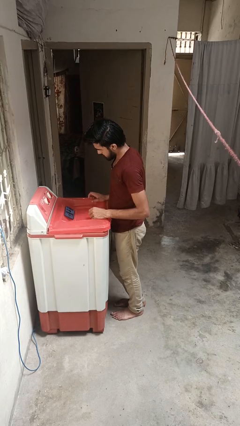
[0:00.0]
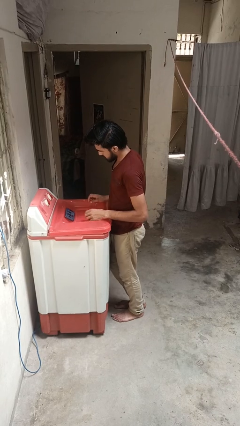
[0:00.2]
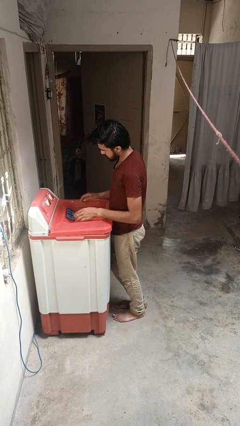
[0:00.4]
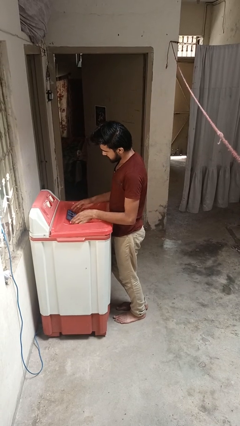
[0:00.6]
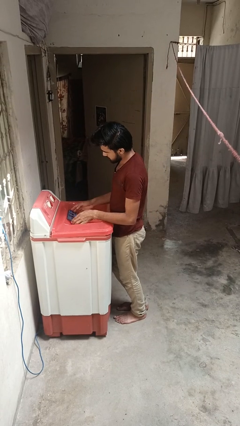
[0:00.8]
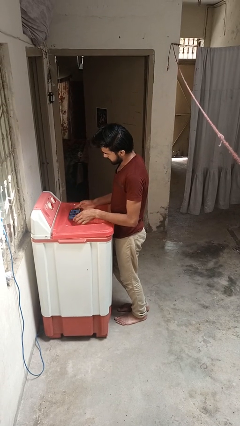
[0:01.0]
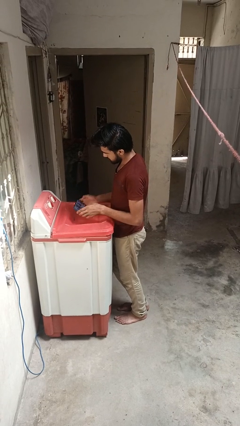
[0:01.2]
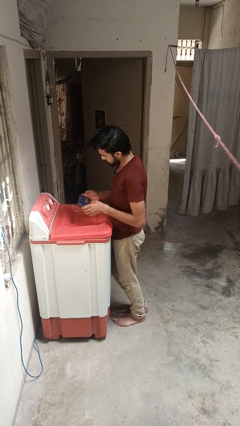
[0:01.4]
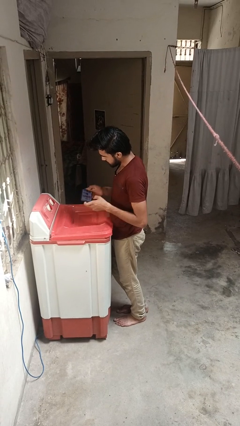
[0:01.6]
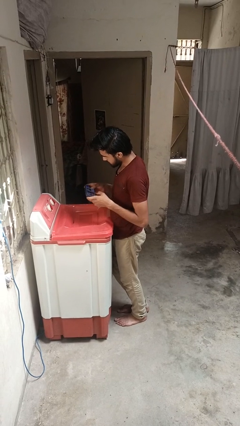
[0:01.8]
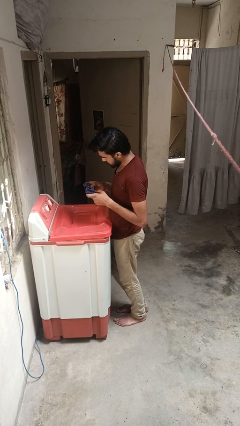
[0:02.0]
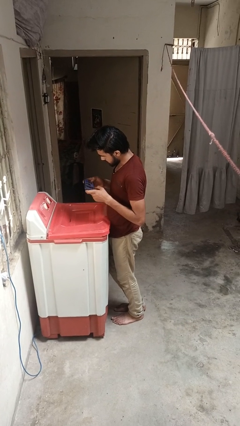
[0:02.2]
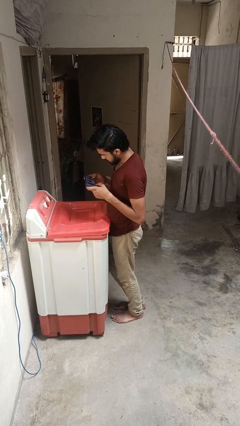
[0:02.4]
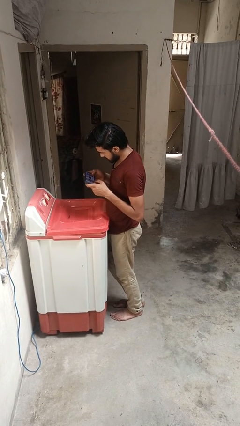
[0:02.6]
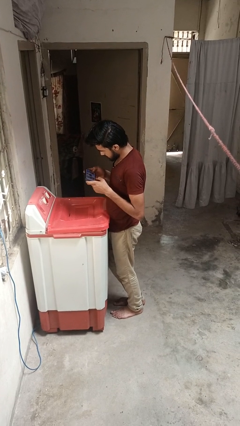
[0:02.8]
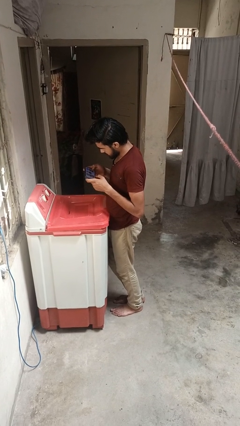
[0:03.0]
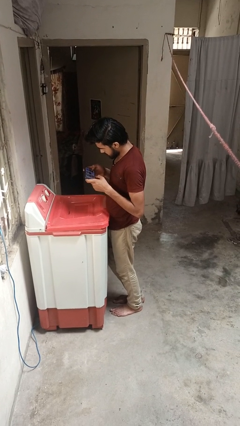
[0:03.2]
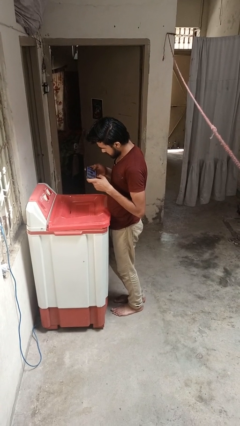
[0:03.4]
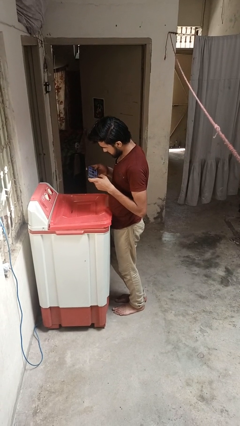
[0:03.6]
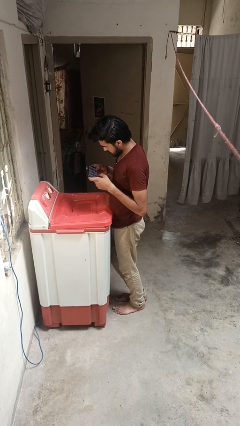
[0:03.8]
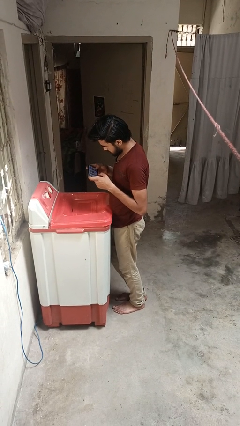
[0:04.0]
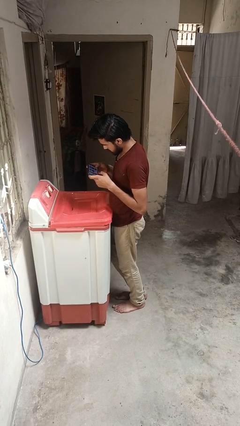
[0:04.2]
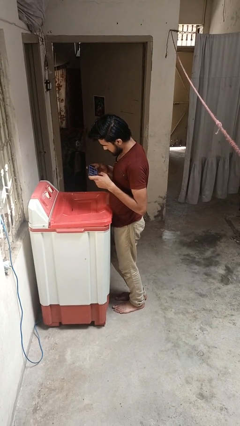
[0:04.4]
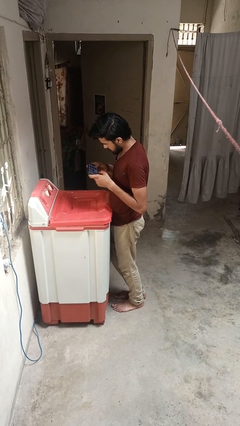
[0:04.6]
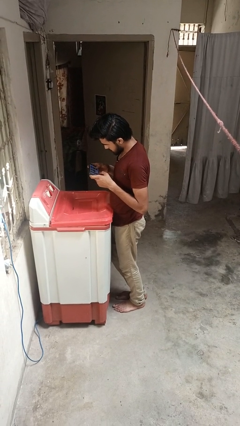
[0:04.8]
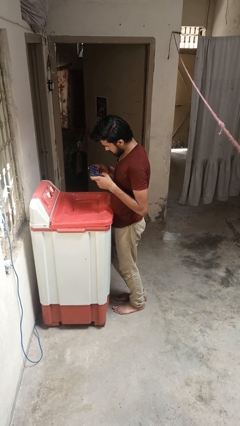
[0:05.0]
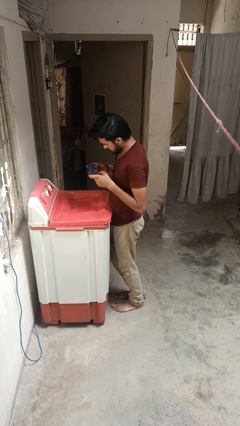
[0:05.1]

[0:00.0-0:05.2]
person interacts with tablet

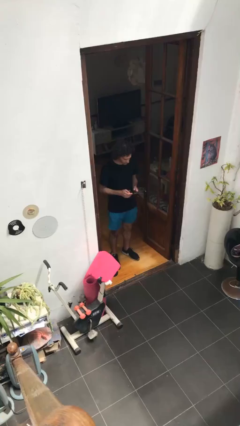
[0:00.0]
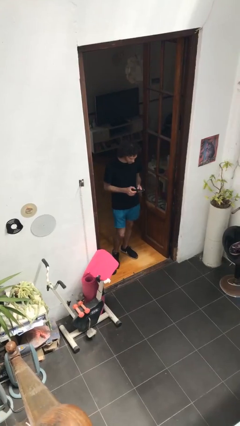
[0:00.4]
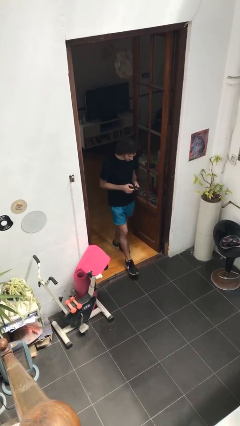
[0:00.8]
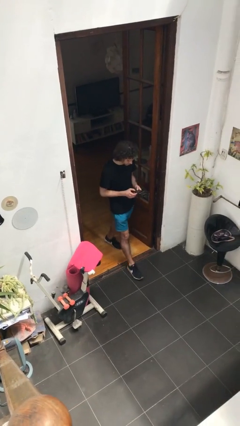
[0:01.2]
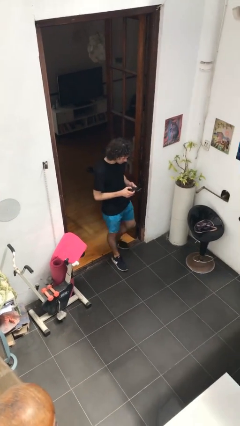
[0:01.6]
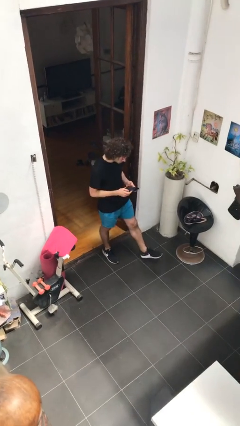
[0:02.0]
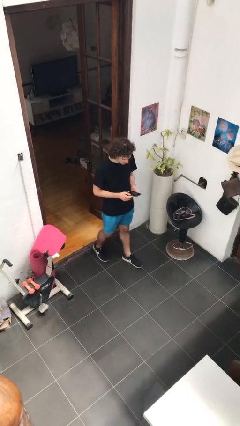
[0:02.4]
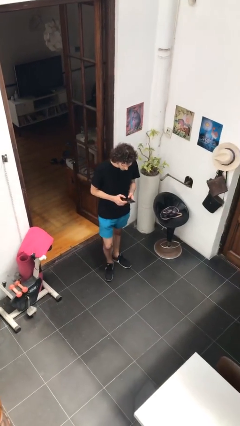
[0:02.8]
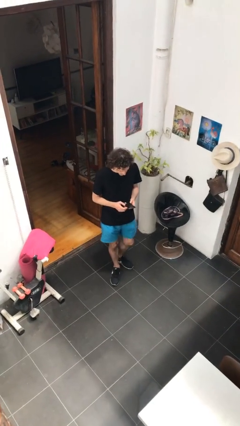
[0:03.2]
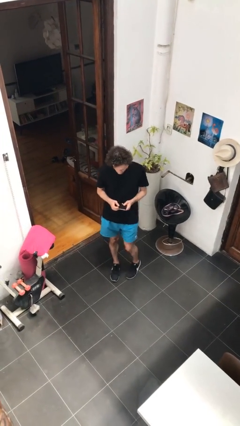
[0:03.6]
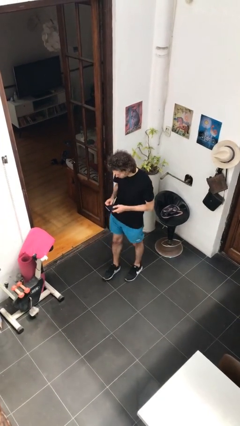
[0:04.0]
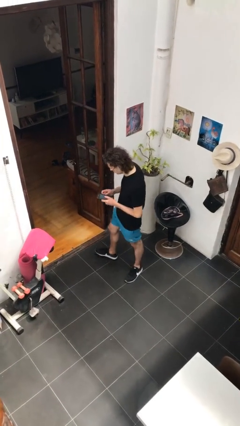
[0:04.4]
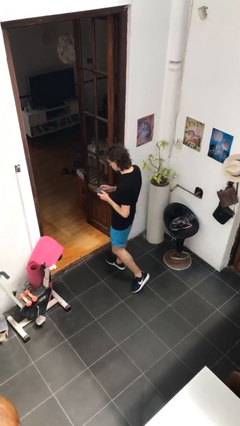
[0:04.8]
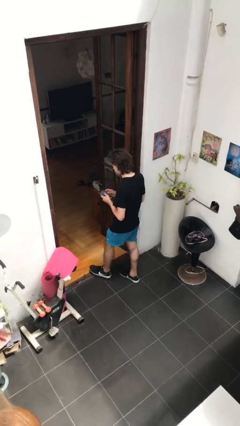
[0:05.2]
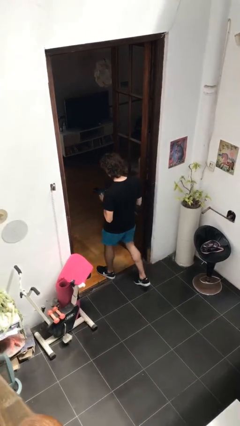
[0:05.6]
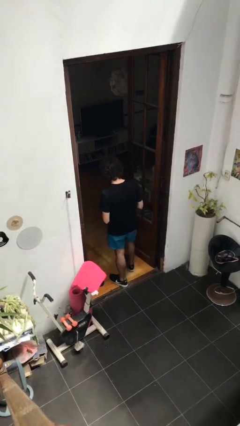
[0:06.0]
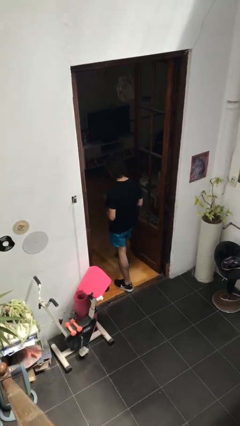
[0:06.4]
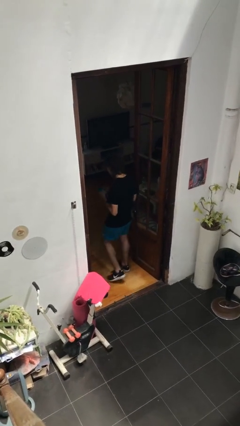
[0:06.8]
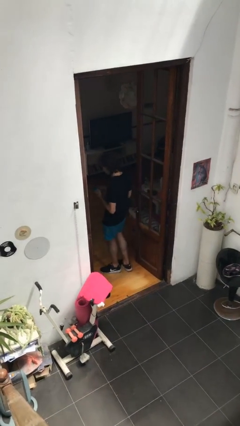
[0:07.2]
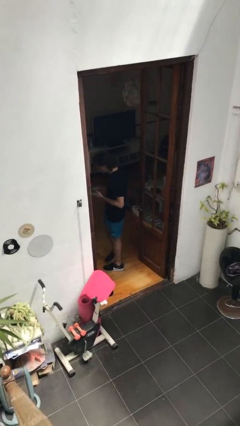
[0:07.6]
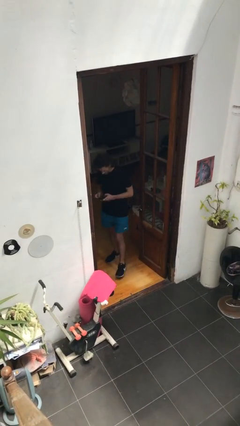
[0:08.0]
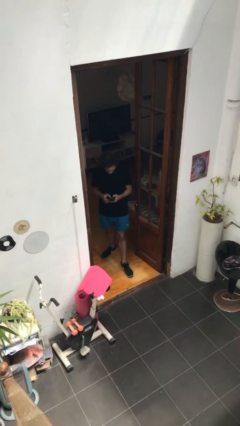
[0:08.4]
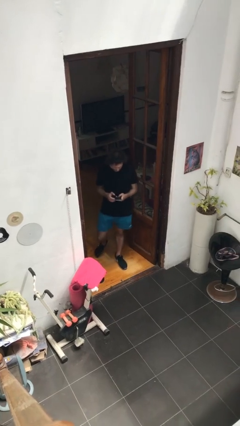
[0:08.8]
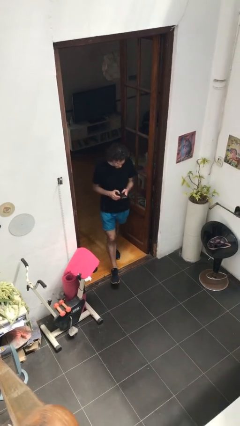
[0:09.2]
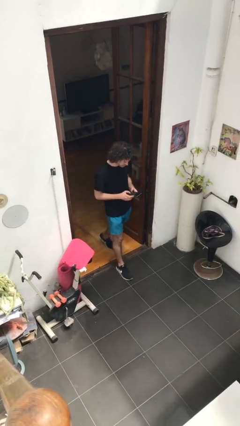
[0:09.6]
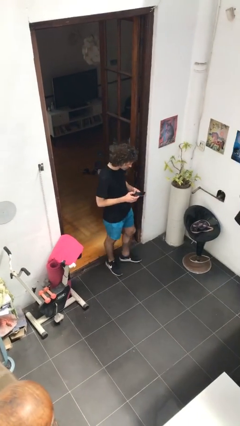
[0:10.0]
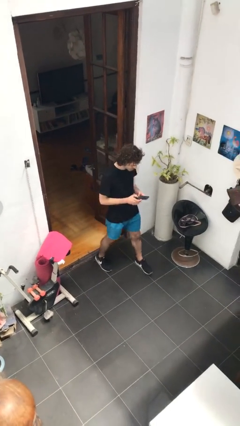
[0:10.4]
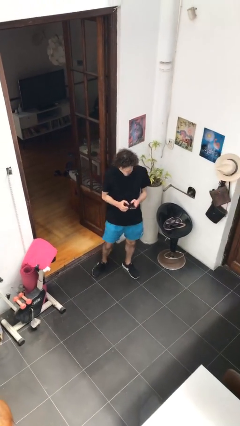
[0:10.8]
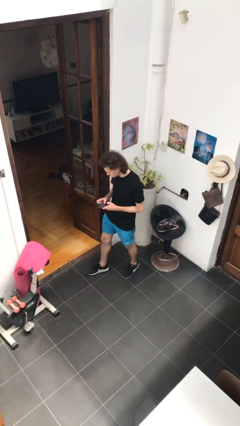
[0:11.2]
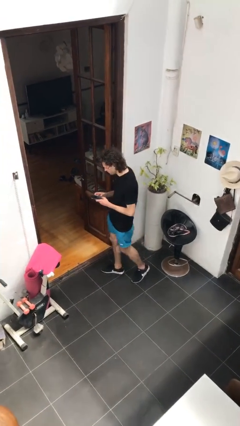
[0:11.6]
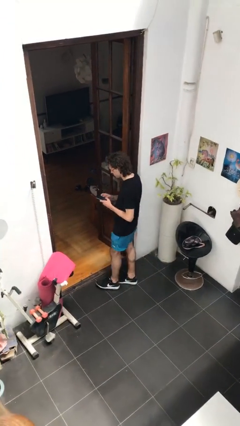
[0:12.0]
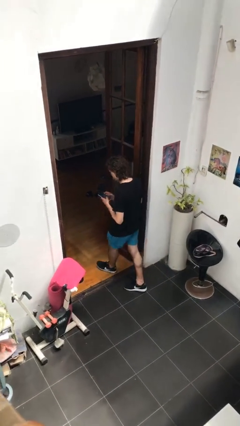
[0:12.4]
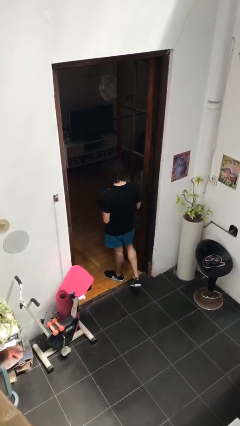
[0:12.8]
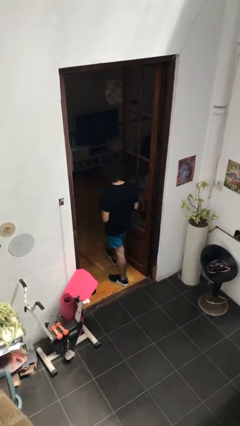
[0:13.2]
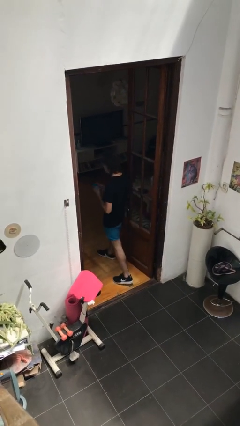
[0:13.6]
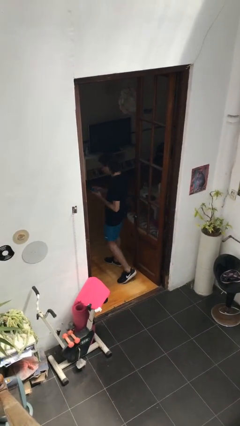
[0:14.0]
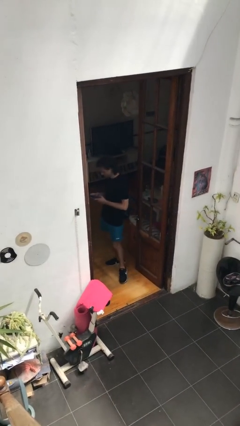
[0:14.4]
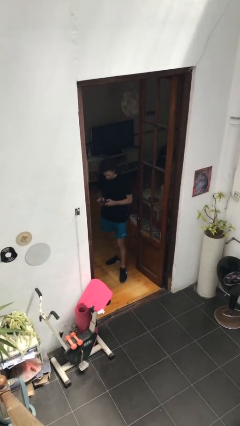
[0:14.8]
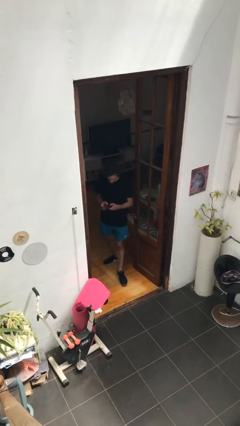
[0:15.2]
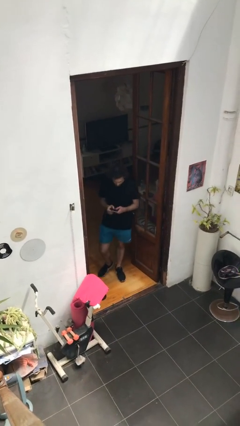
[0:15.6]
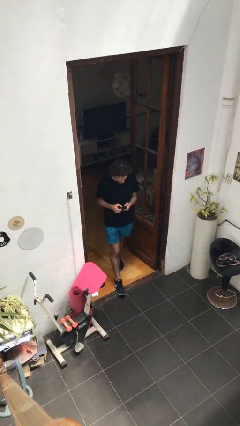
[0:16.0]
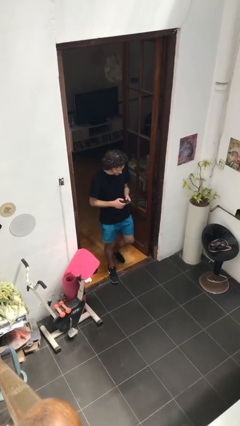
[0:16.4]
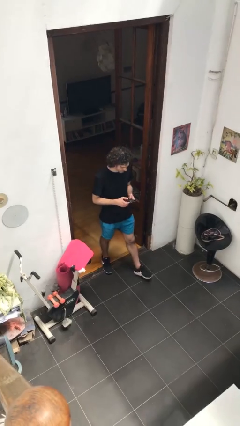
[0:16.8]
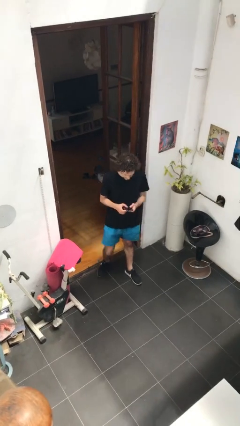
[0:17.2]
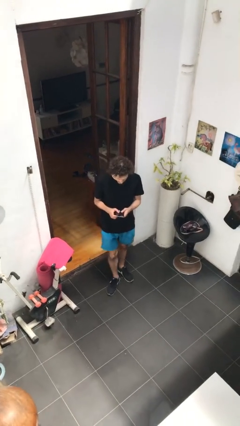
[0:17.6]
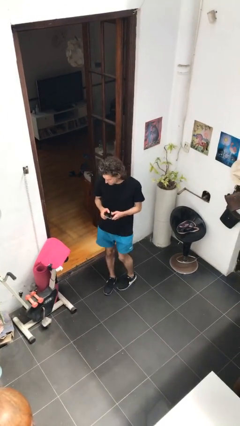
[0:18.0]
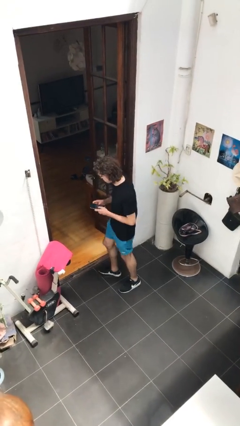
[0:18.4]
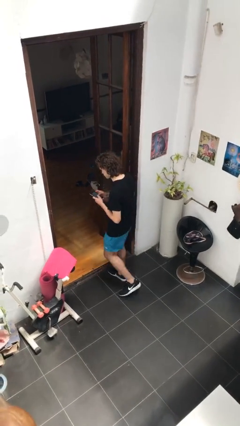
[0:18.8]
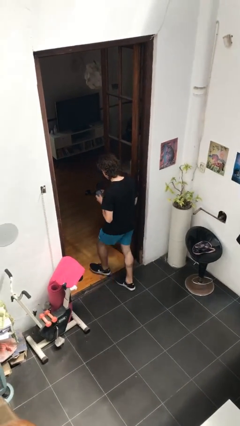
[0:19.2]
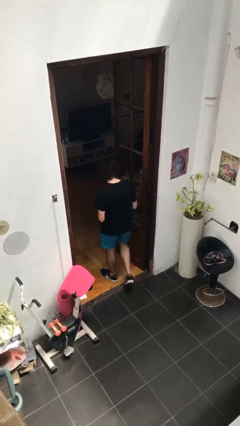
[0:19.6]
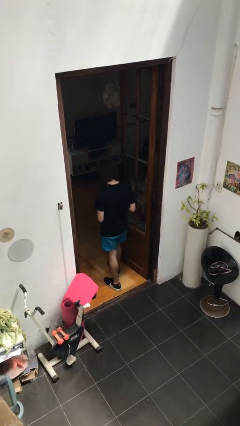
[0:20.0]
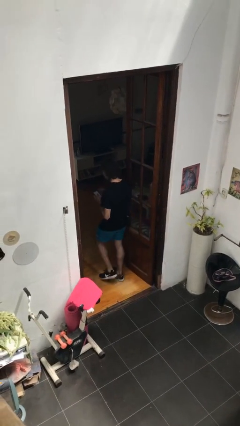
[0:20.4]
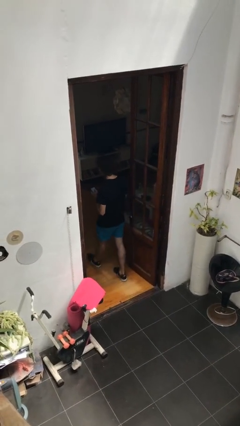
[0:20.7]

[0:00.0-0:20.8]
person texts on phone

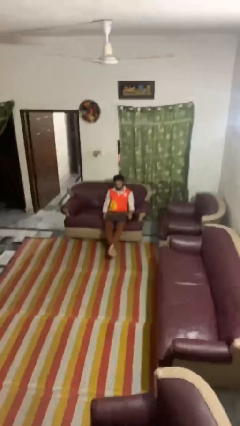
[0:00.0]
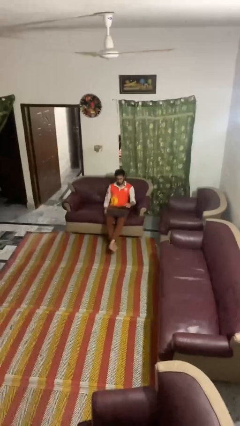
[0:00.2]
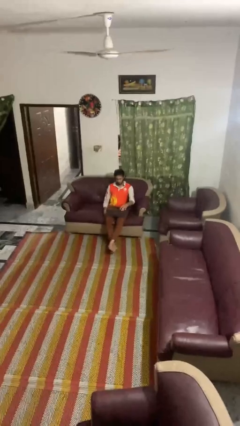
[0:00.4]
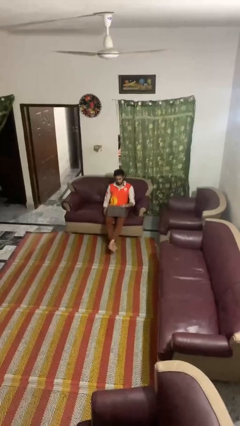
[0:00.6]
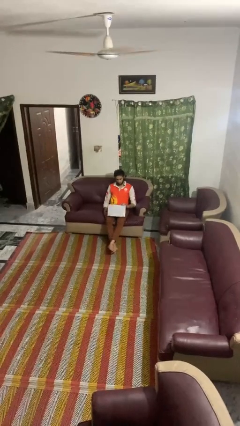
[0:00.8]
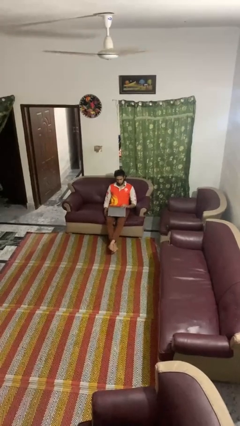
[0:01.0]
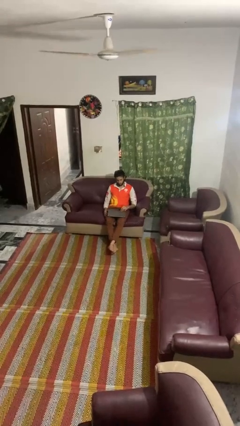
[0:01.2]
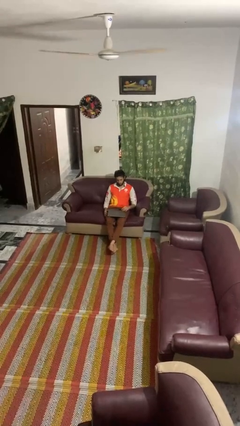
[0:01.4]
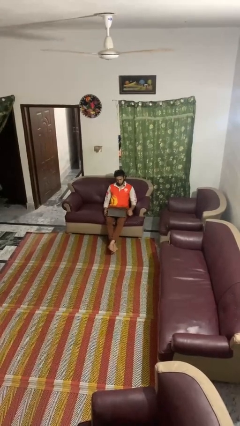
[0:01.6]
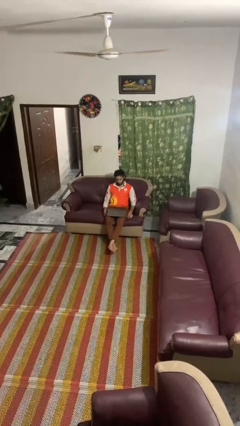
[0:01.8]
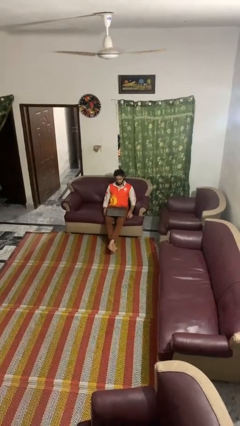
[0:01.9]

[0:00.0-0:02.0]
person closes laptop

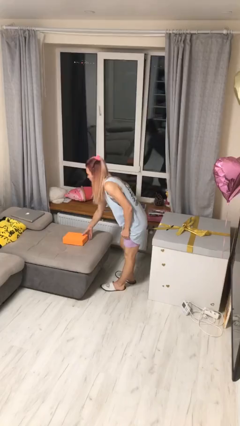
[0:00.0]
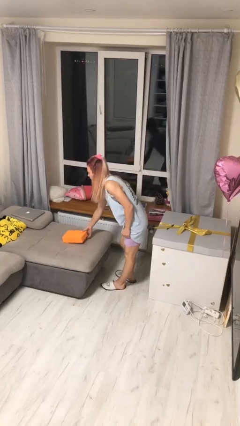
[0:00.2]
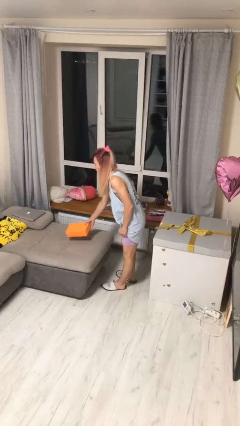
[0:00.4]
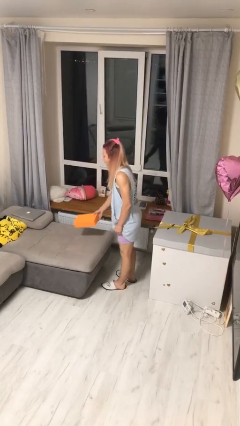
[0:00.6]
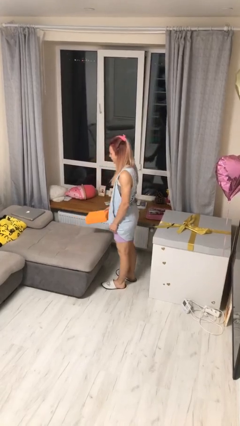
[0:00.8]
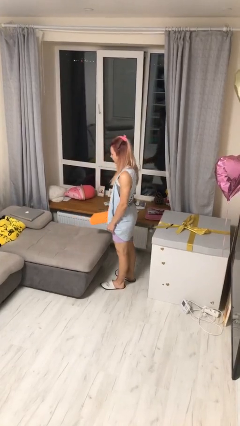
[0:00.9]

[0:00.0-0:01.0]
person picks up object from couch
